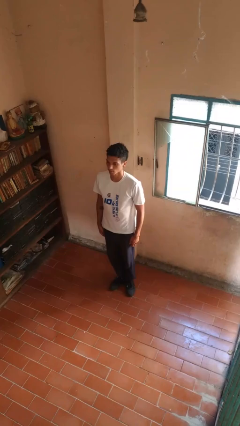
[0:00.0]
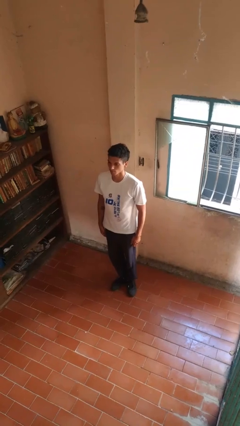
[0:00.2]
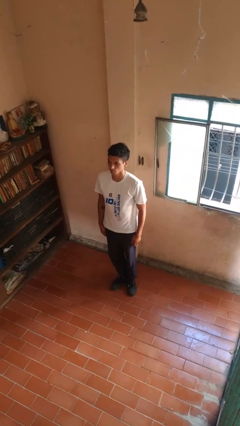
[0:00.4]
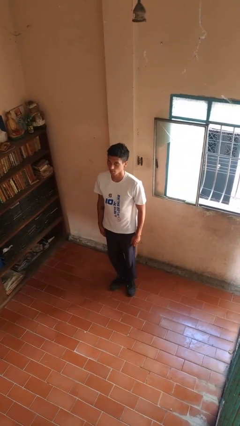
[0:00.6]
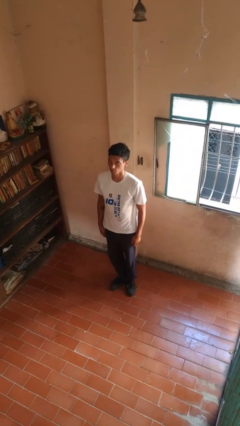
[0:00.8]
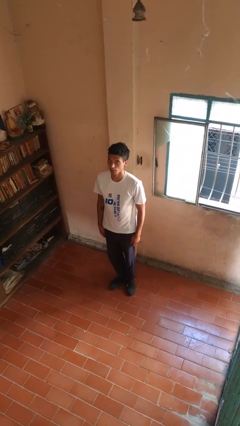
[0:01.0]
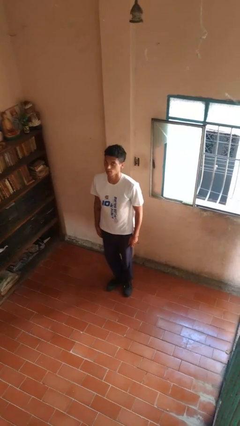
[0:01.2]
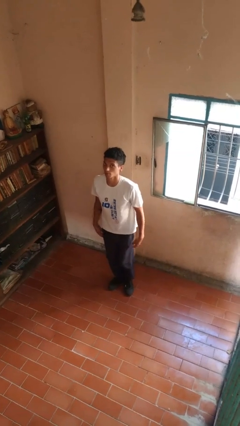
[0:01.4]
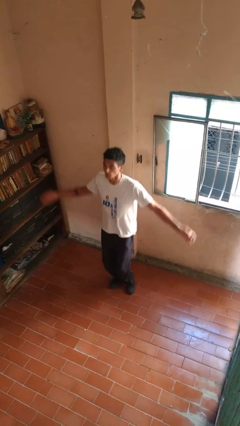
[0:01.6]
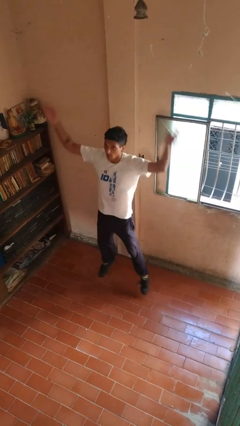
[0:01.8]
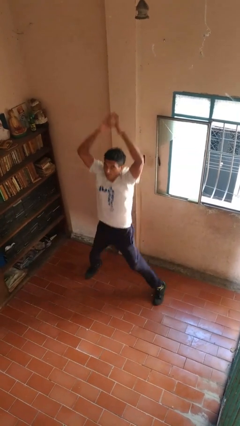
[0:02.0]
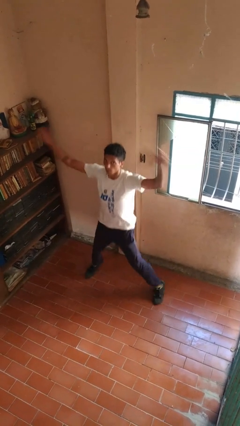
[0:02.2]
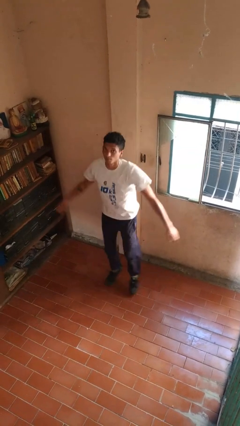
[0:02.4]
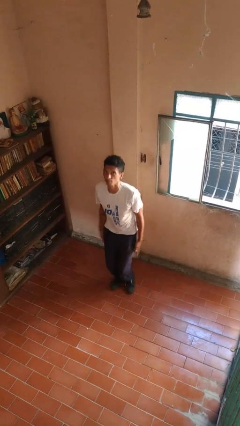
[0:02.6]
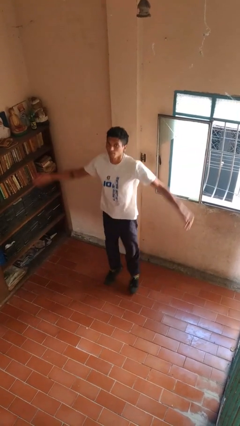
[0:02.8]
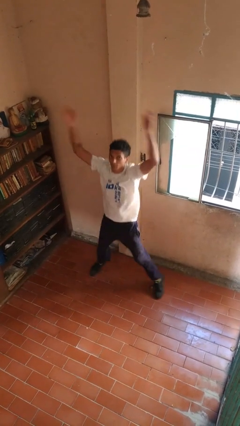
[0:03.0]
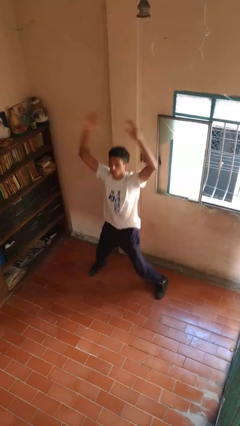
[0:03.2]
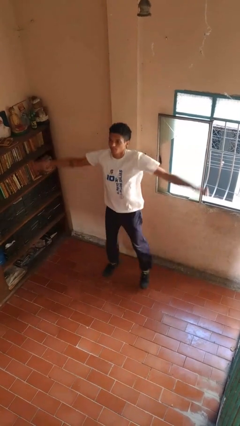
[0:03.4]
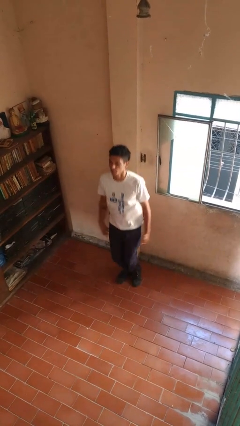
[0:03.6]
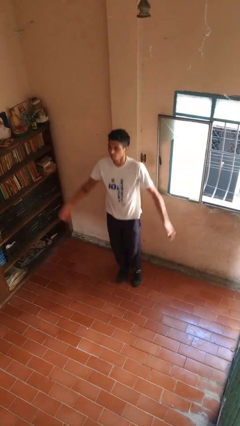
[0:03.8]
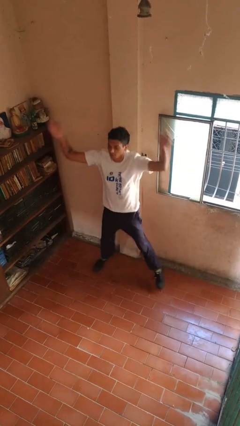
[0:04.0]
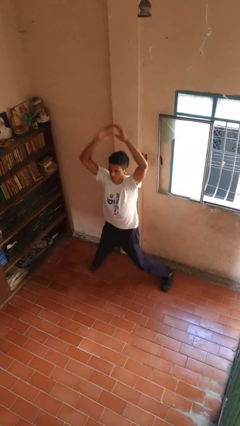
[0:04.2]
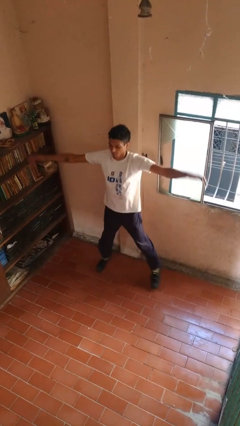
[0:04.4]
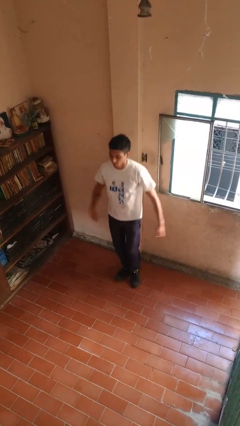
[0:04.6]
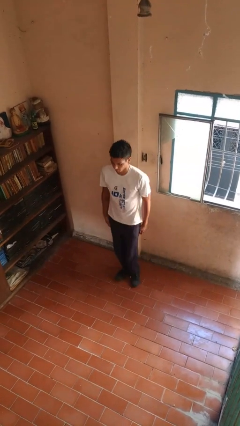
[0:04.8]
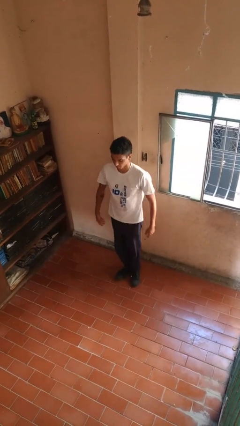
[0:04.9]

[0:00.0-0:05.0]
person exercises with jumping jacks

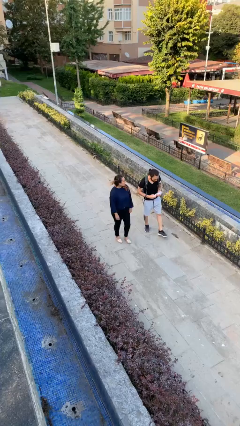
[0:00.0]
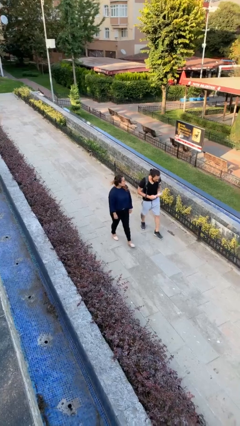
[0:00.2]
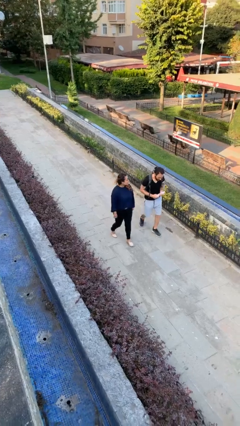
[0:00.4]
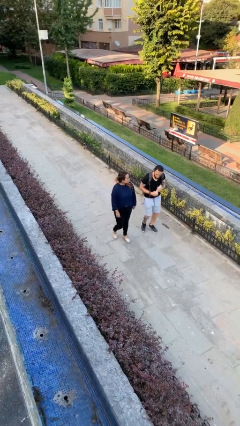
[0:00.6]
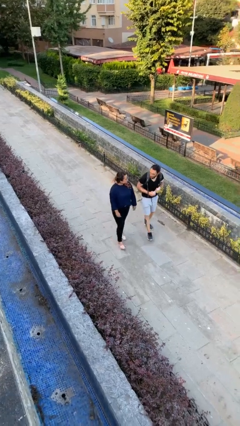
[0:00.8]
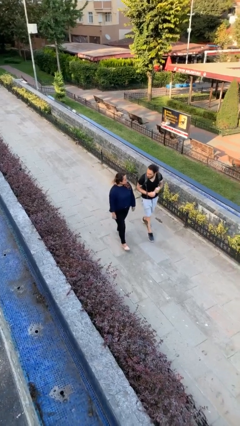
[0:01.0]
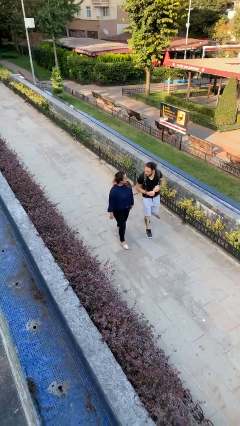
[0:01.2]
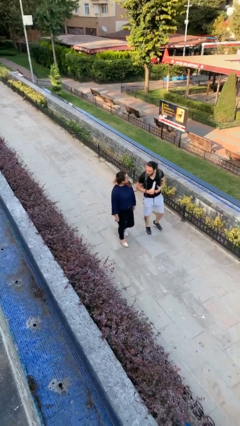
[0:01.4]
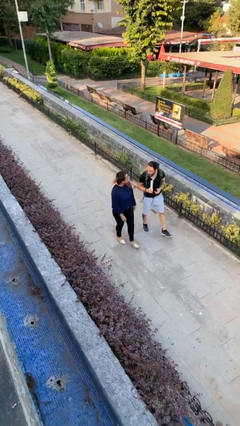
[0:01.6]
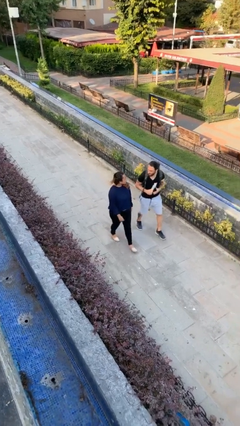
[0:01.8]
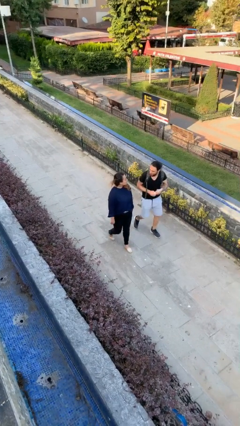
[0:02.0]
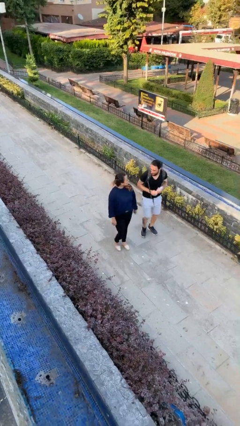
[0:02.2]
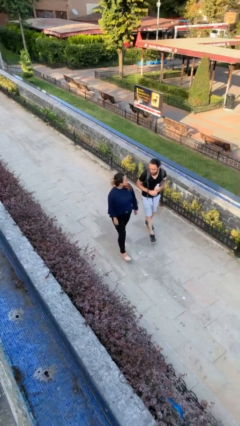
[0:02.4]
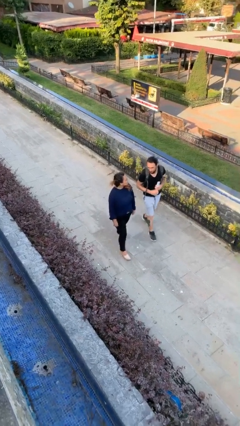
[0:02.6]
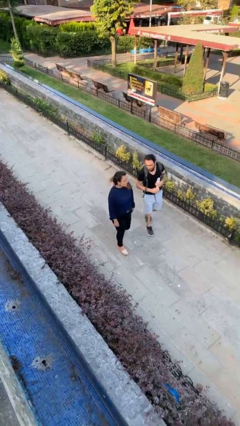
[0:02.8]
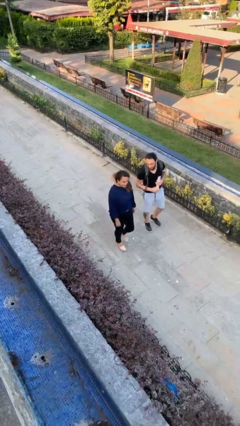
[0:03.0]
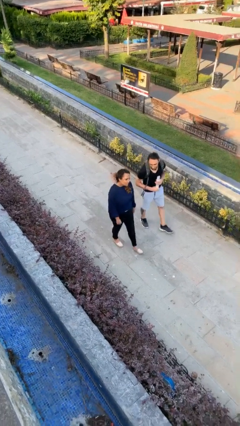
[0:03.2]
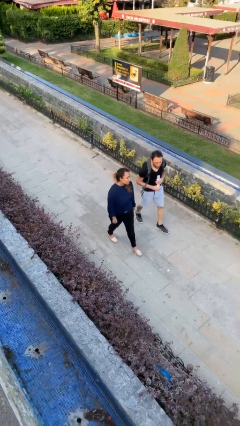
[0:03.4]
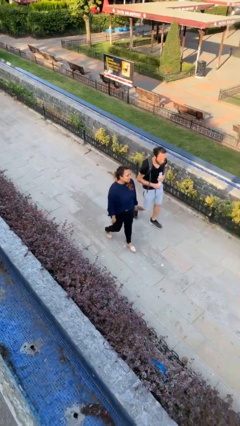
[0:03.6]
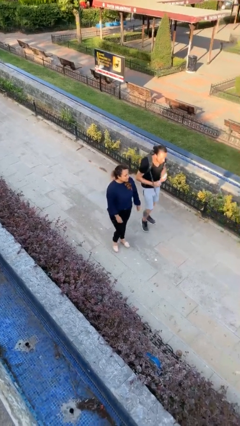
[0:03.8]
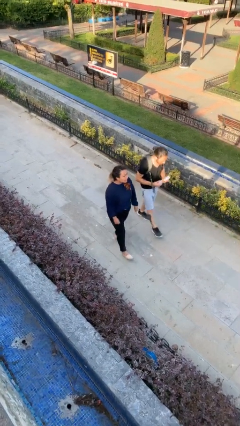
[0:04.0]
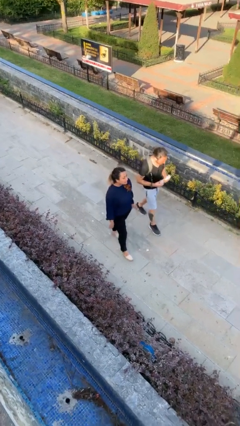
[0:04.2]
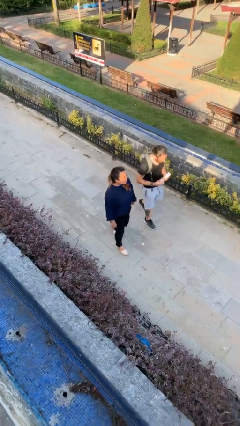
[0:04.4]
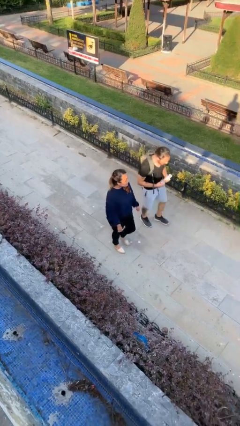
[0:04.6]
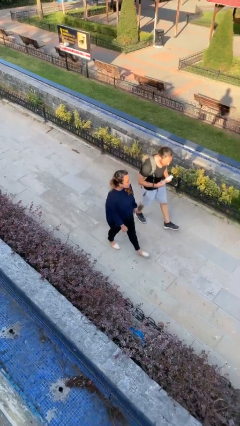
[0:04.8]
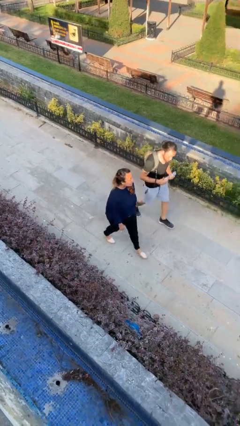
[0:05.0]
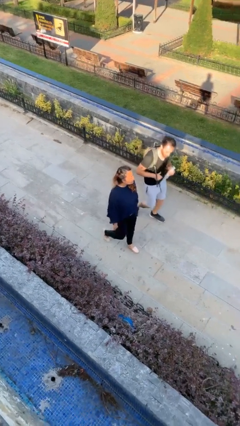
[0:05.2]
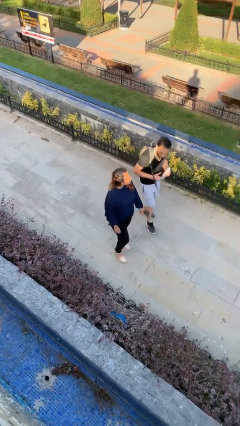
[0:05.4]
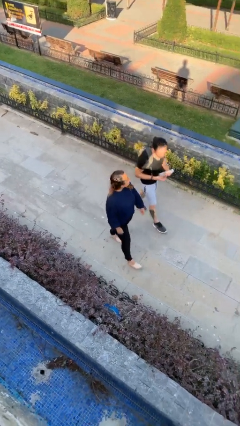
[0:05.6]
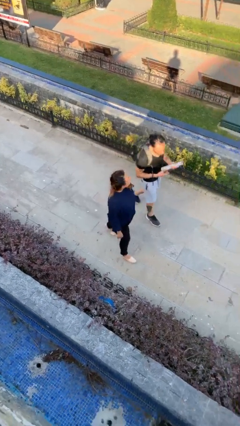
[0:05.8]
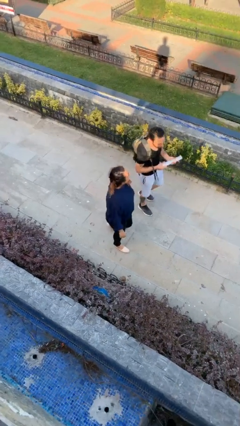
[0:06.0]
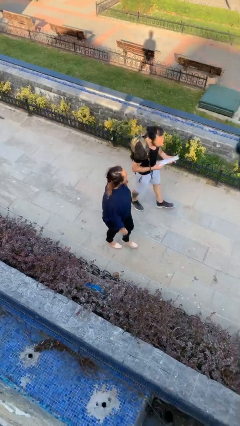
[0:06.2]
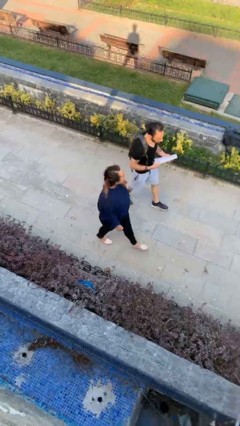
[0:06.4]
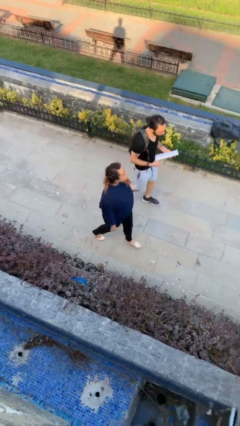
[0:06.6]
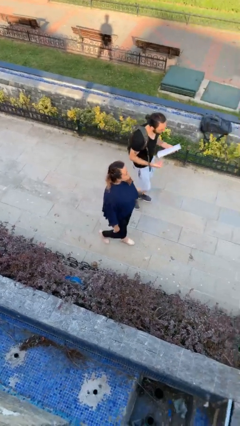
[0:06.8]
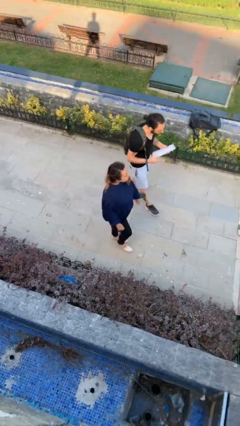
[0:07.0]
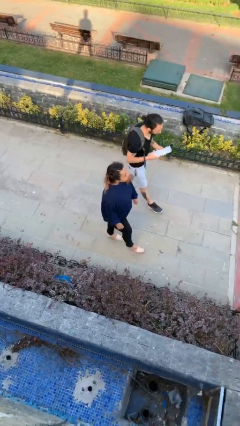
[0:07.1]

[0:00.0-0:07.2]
person talks to person

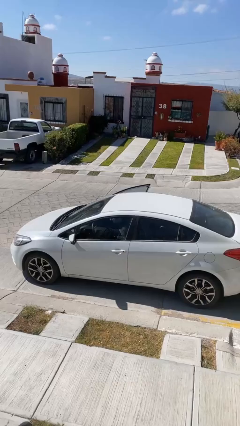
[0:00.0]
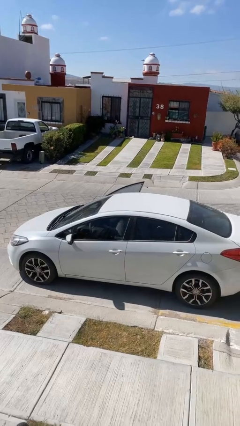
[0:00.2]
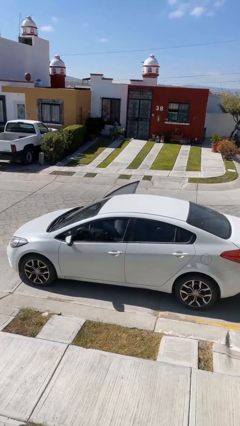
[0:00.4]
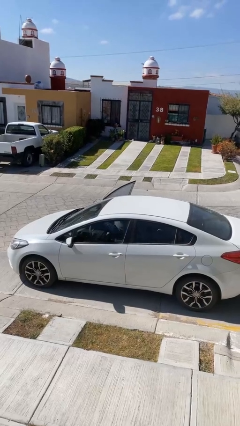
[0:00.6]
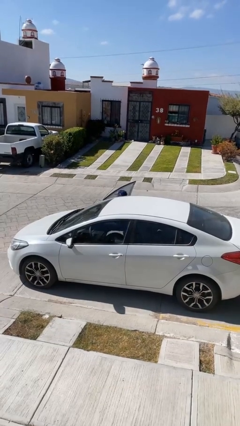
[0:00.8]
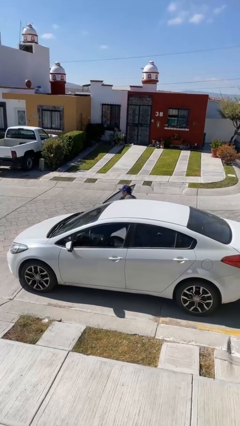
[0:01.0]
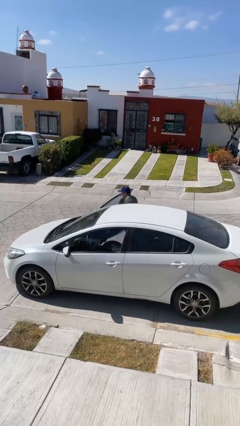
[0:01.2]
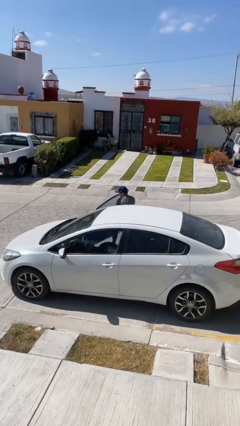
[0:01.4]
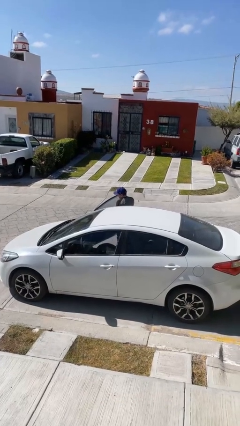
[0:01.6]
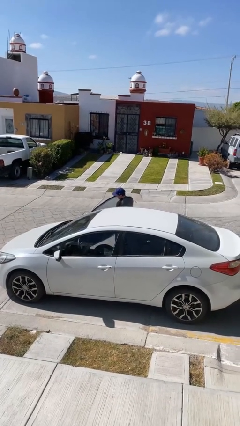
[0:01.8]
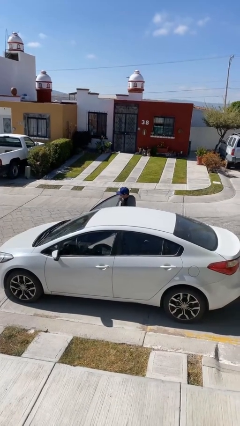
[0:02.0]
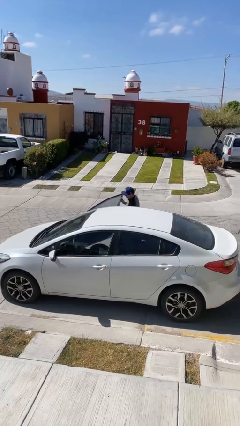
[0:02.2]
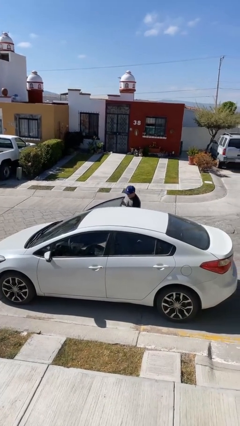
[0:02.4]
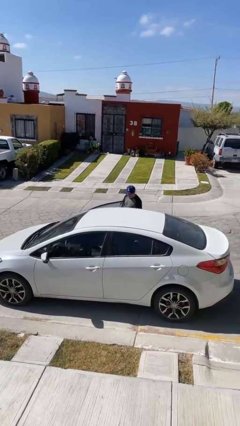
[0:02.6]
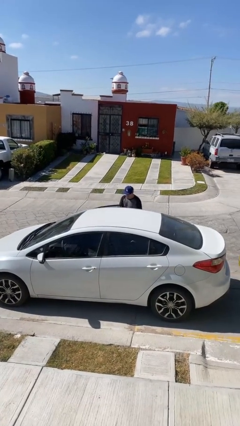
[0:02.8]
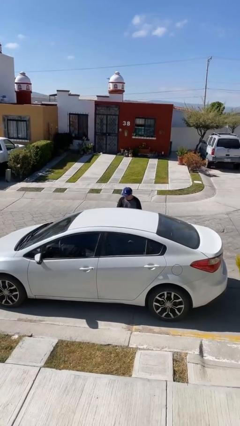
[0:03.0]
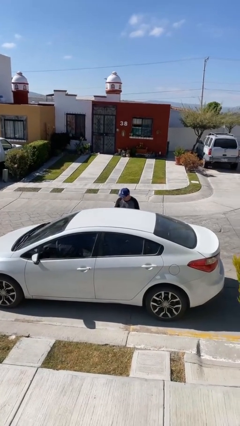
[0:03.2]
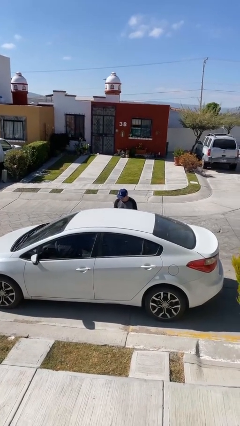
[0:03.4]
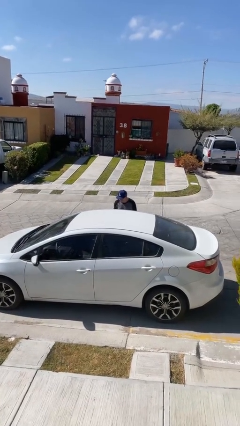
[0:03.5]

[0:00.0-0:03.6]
car drops off person

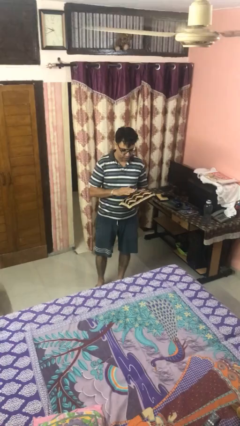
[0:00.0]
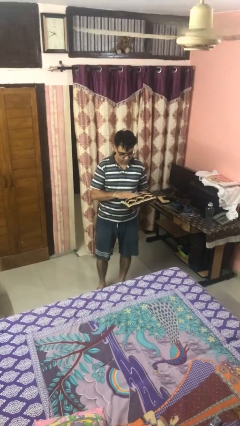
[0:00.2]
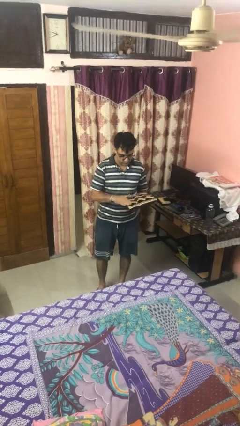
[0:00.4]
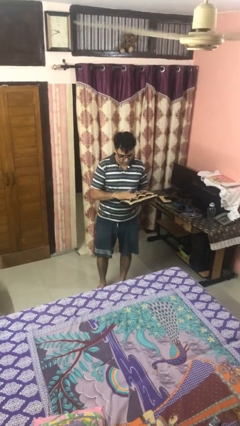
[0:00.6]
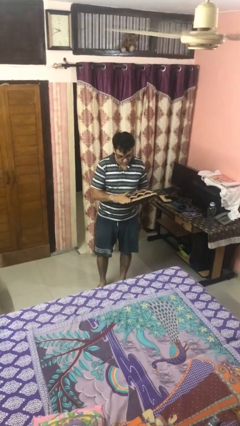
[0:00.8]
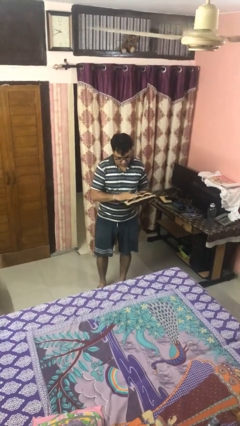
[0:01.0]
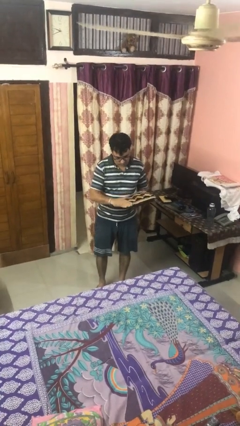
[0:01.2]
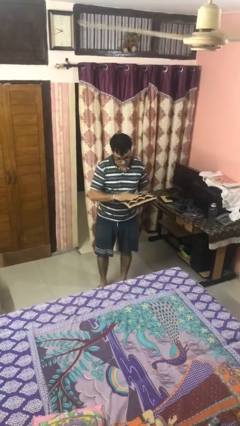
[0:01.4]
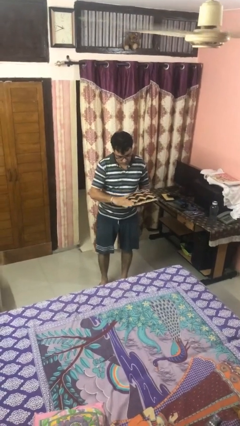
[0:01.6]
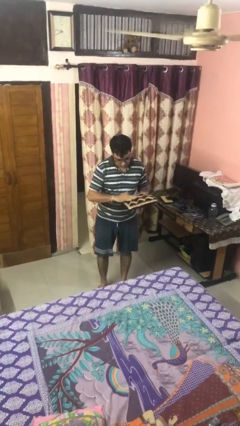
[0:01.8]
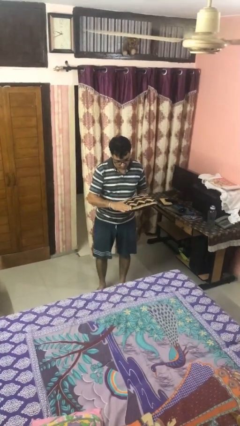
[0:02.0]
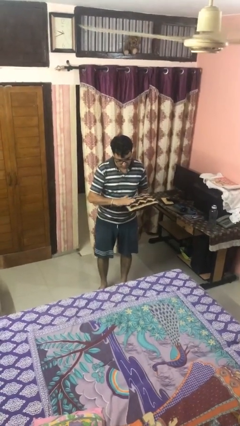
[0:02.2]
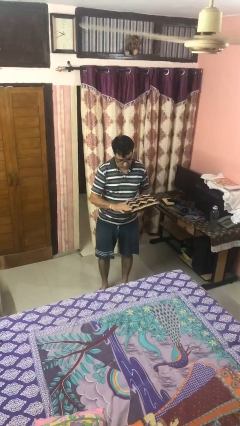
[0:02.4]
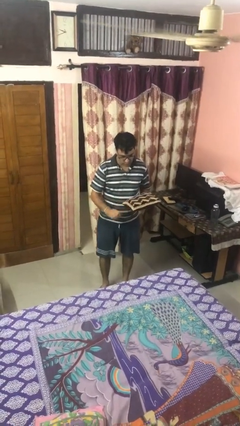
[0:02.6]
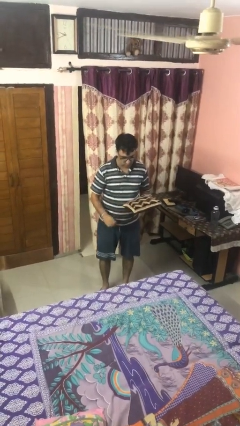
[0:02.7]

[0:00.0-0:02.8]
person waves hand over object
